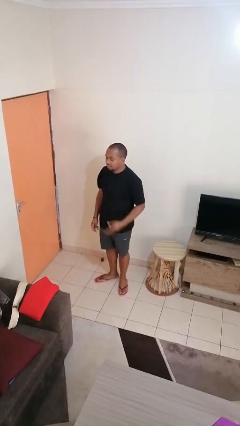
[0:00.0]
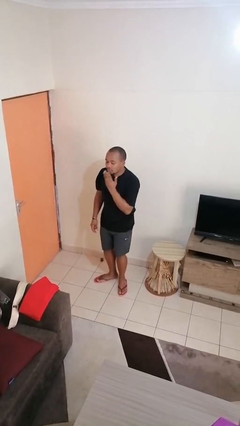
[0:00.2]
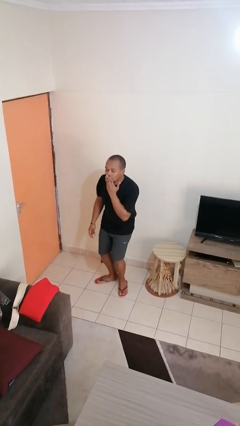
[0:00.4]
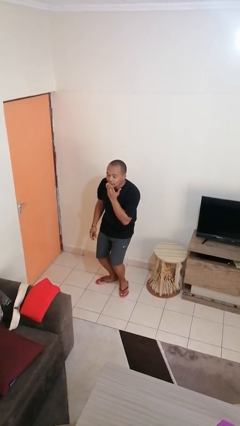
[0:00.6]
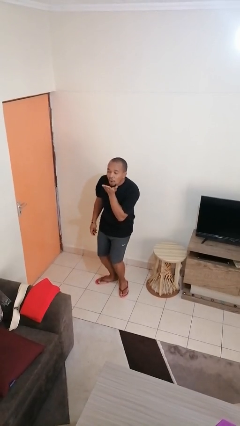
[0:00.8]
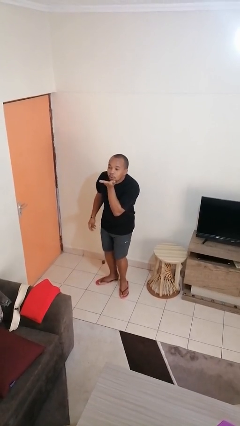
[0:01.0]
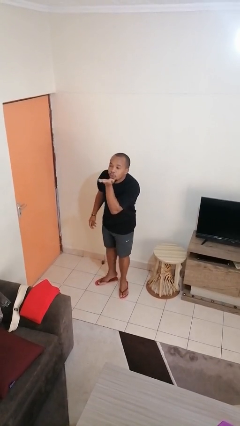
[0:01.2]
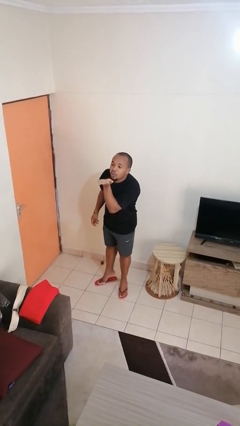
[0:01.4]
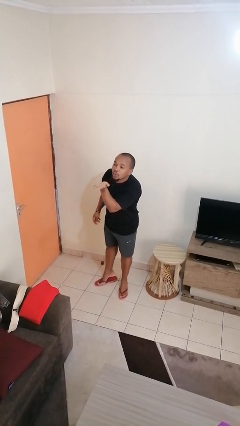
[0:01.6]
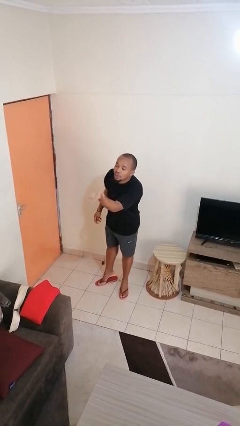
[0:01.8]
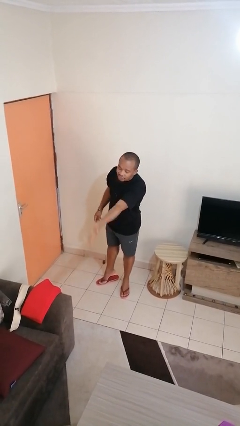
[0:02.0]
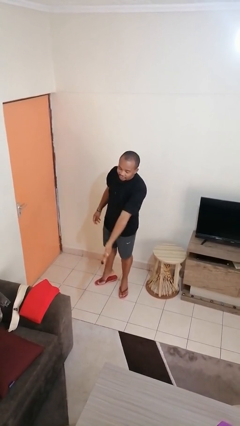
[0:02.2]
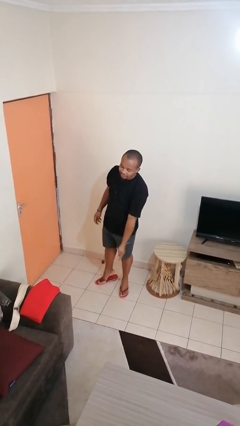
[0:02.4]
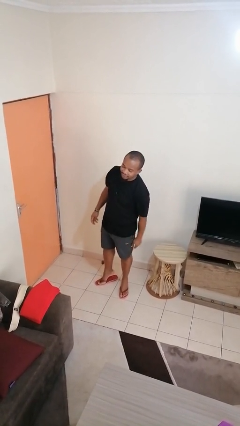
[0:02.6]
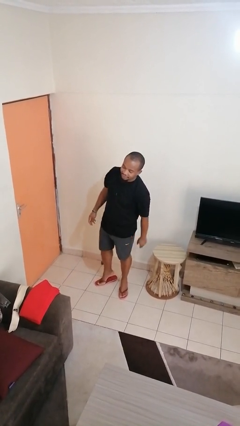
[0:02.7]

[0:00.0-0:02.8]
person gestures blow kiss

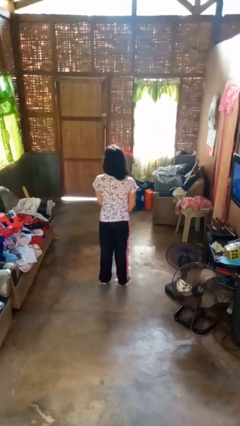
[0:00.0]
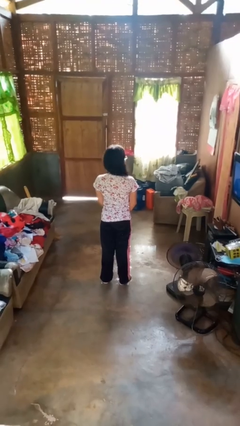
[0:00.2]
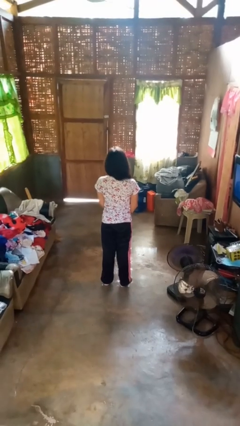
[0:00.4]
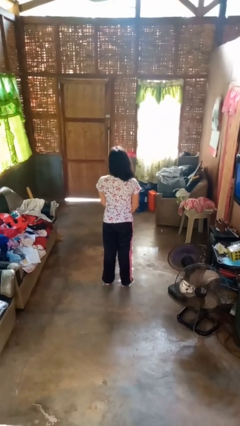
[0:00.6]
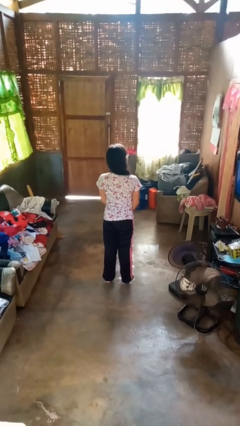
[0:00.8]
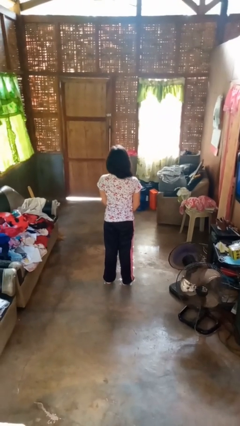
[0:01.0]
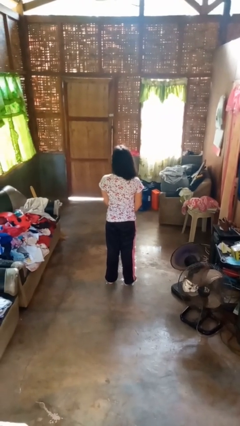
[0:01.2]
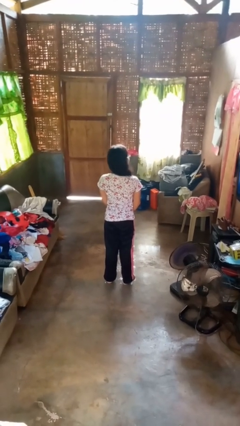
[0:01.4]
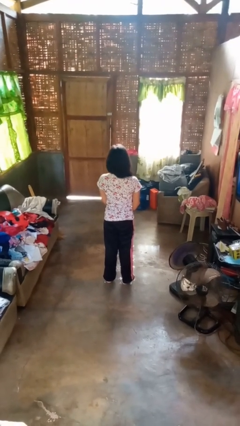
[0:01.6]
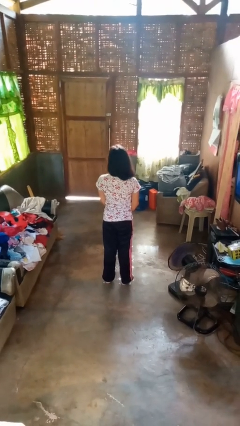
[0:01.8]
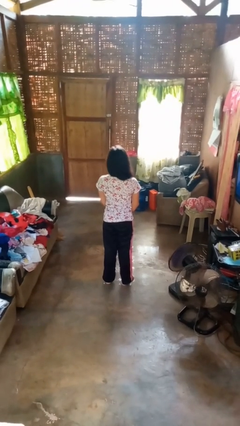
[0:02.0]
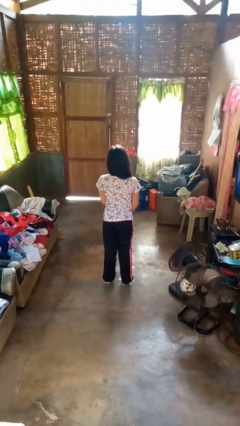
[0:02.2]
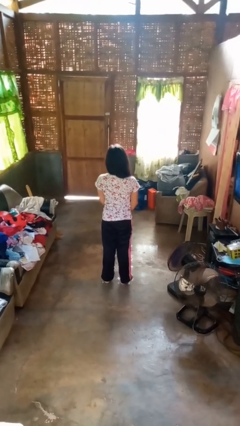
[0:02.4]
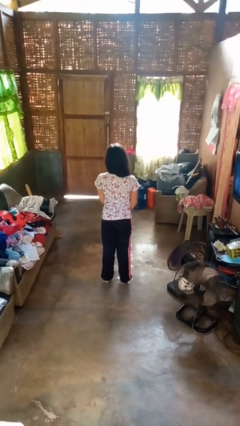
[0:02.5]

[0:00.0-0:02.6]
person shakes head

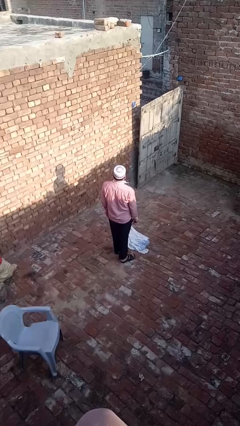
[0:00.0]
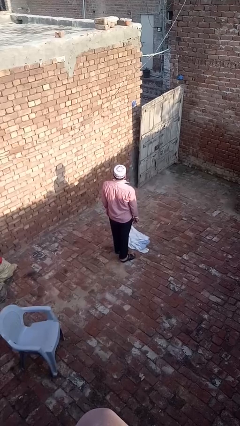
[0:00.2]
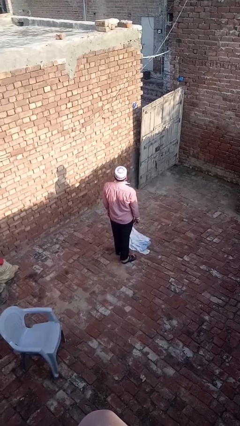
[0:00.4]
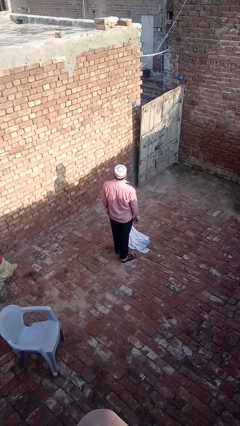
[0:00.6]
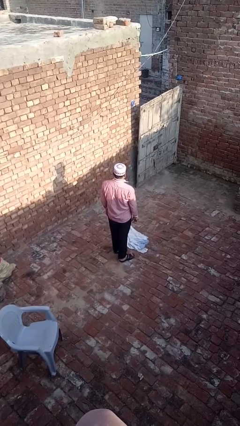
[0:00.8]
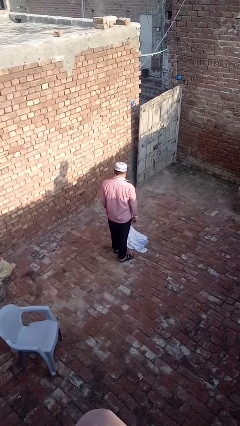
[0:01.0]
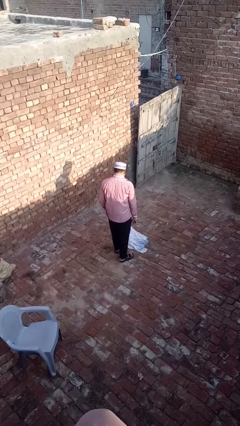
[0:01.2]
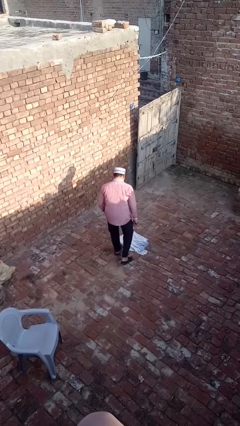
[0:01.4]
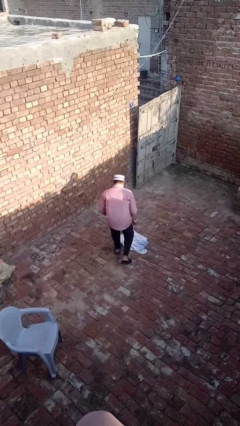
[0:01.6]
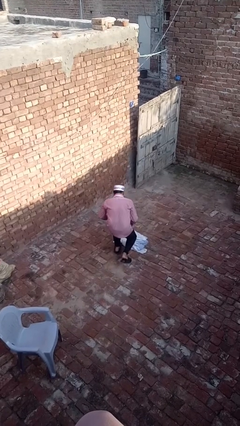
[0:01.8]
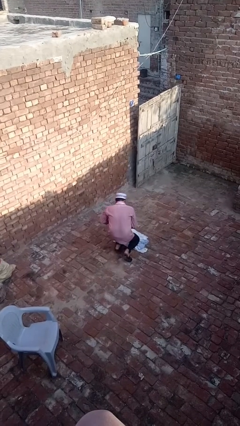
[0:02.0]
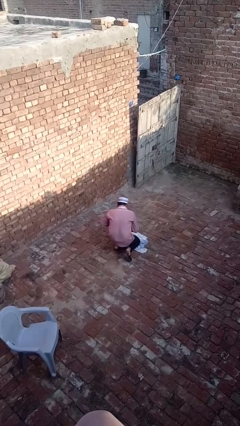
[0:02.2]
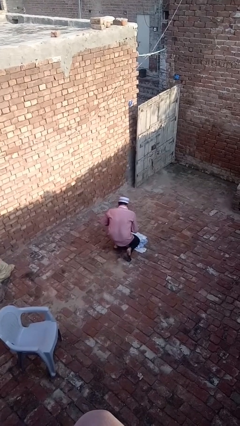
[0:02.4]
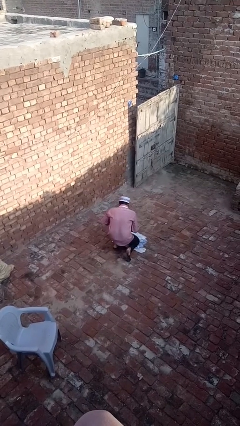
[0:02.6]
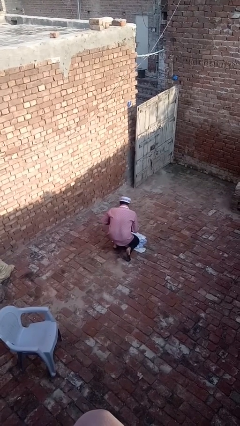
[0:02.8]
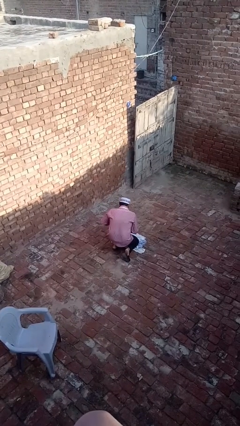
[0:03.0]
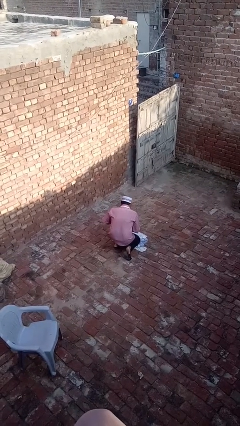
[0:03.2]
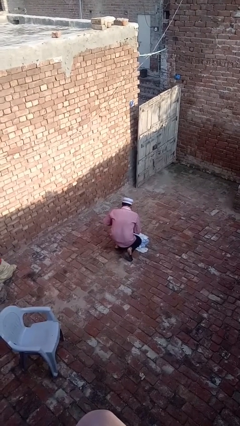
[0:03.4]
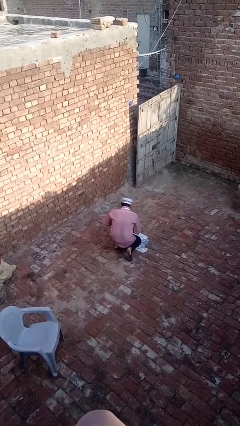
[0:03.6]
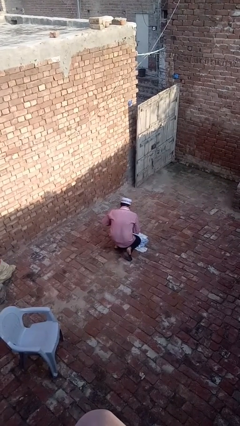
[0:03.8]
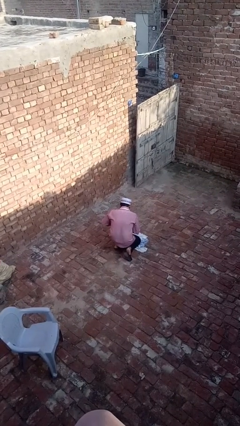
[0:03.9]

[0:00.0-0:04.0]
person kneels

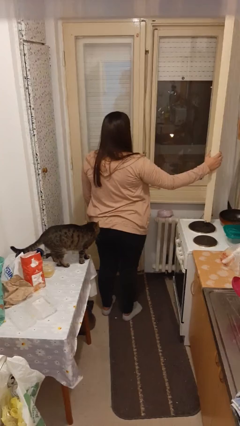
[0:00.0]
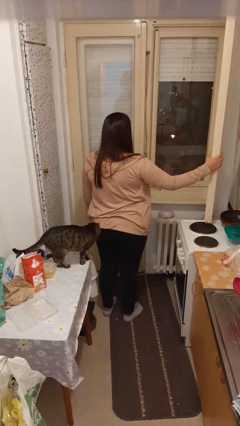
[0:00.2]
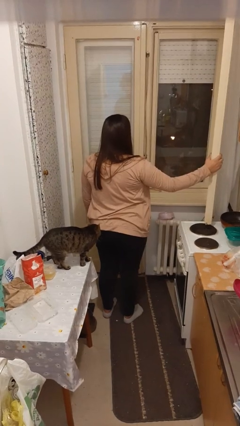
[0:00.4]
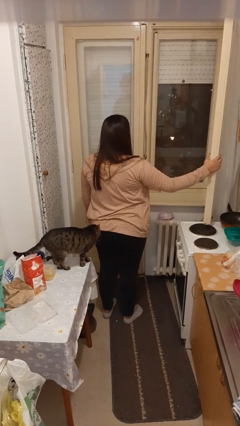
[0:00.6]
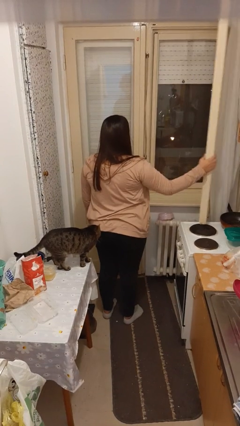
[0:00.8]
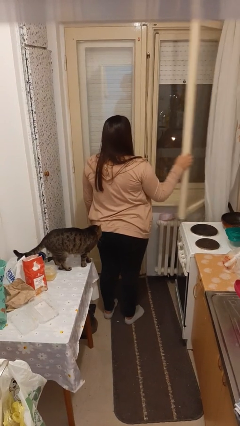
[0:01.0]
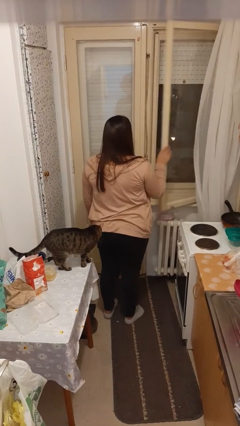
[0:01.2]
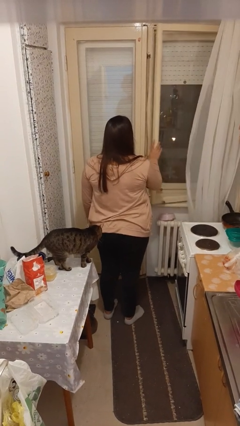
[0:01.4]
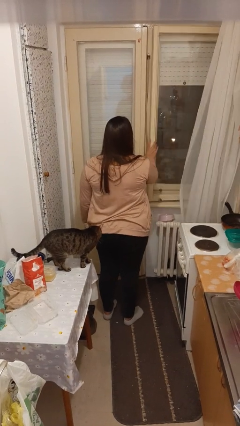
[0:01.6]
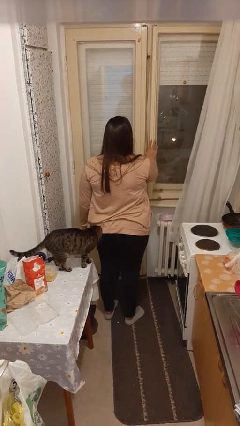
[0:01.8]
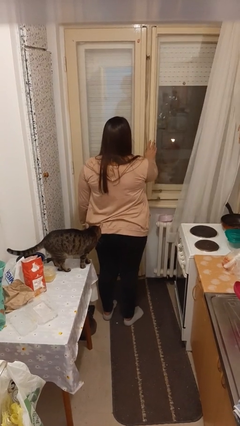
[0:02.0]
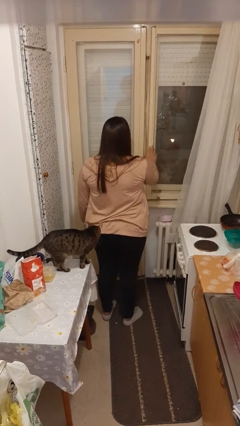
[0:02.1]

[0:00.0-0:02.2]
person closes home window

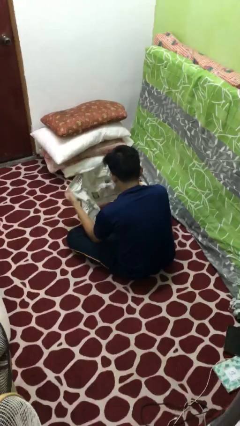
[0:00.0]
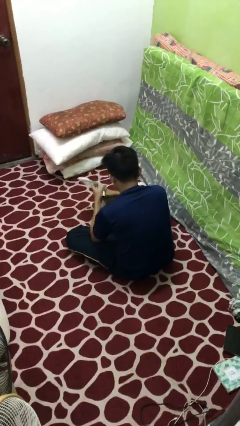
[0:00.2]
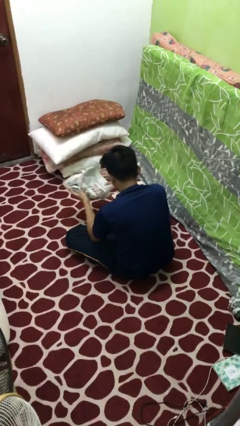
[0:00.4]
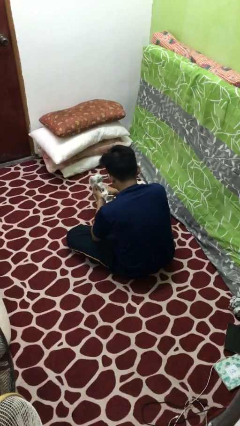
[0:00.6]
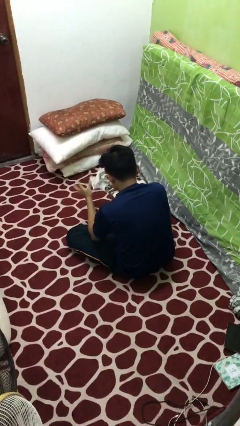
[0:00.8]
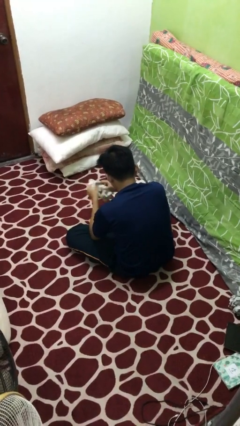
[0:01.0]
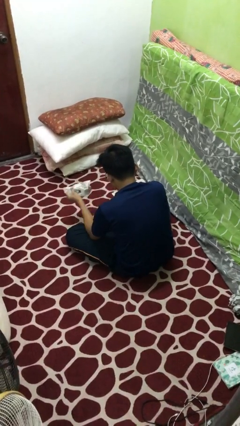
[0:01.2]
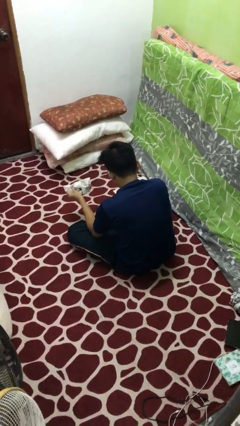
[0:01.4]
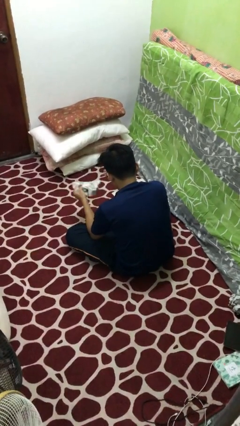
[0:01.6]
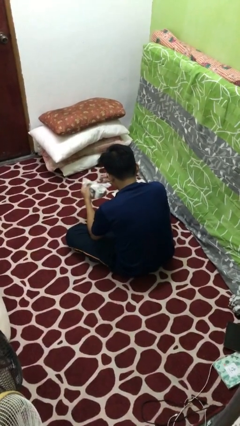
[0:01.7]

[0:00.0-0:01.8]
person crumples paper

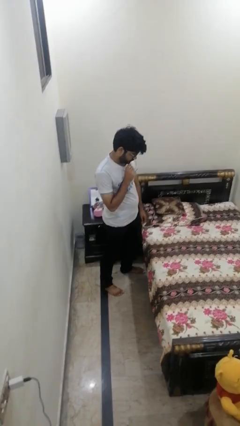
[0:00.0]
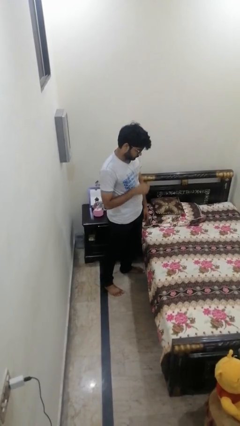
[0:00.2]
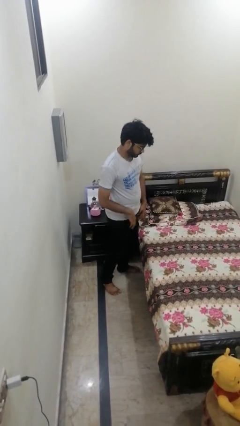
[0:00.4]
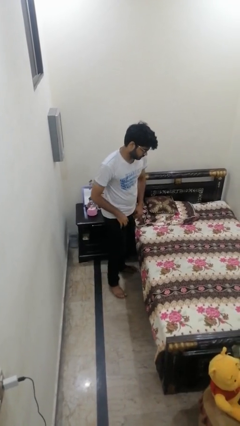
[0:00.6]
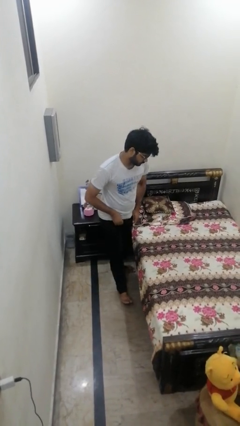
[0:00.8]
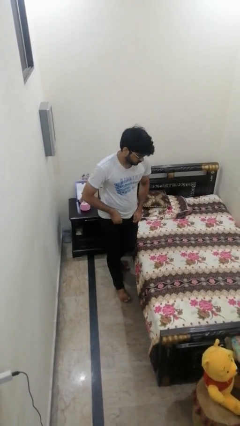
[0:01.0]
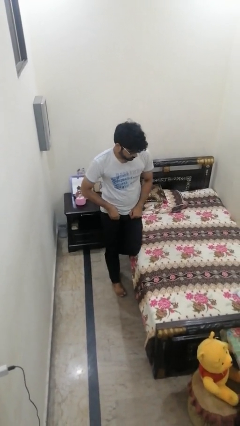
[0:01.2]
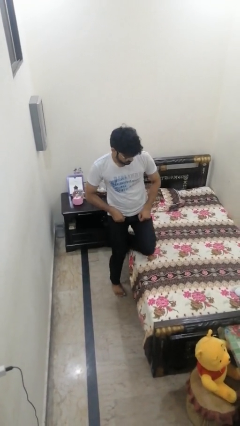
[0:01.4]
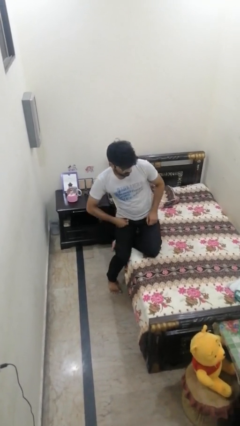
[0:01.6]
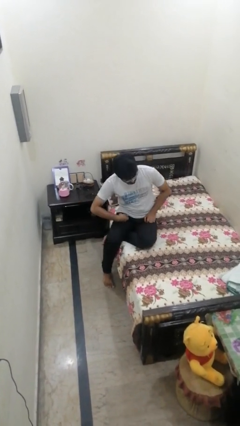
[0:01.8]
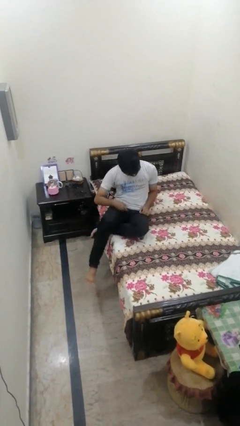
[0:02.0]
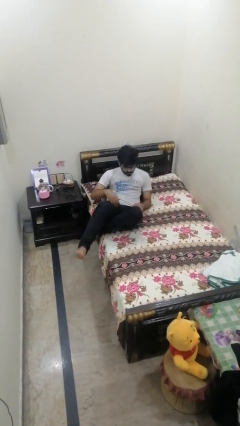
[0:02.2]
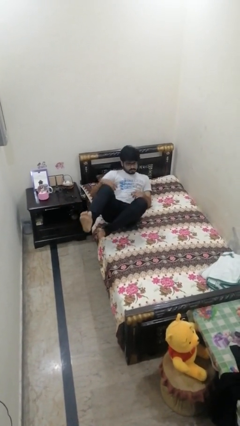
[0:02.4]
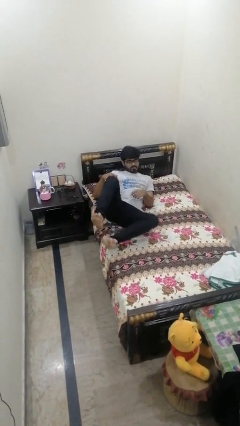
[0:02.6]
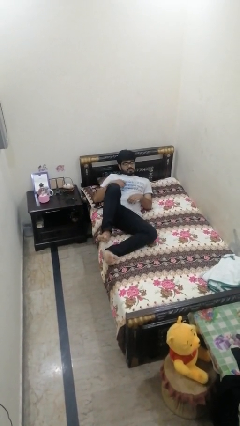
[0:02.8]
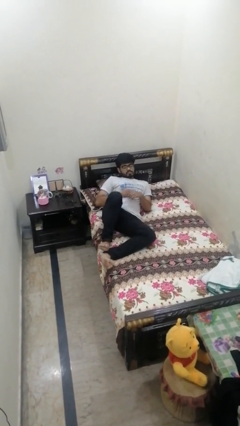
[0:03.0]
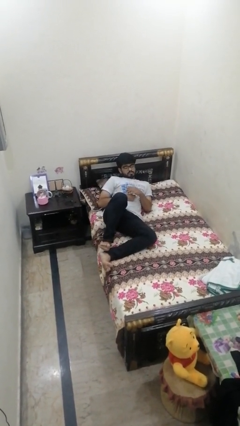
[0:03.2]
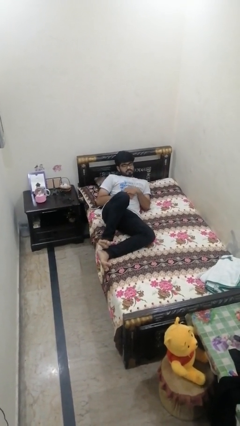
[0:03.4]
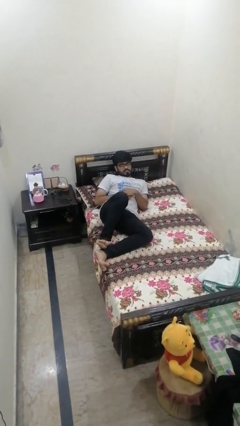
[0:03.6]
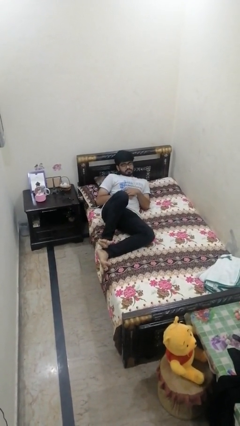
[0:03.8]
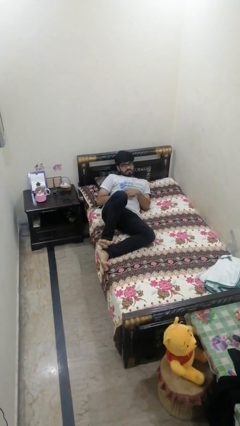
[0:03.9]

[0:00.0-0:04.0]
person lies down on bed
